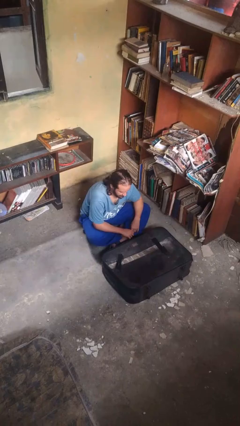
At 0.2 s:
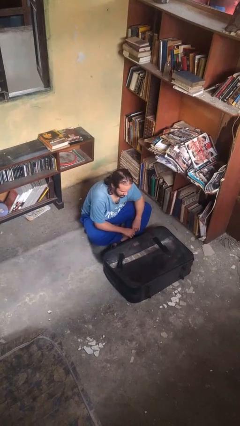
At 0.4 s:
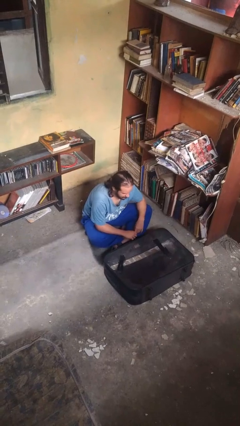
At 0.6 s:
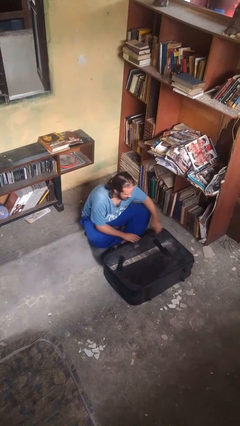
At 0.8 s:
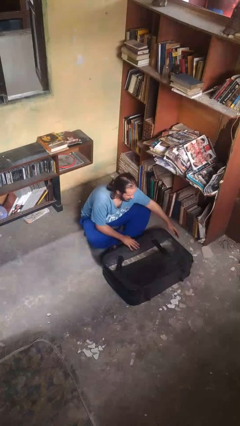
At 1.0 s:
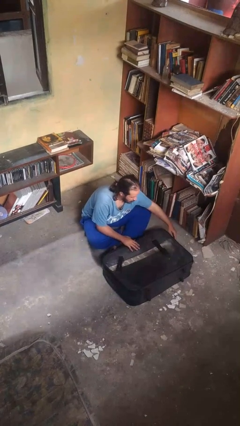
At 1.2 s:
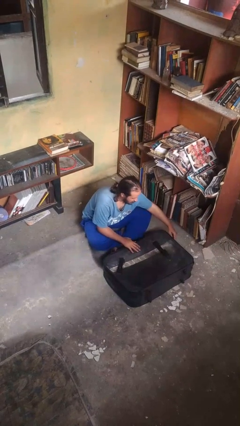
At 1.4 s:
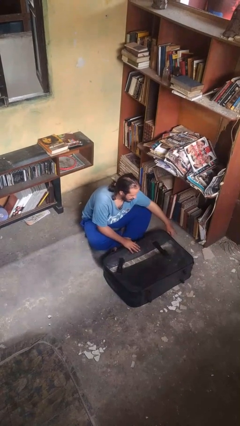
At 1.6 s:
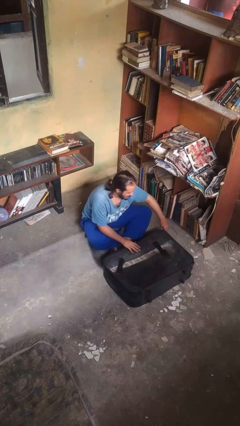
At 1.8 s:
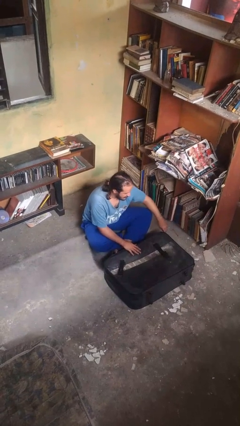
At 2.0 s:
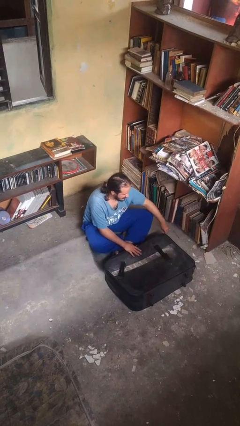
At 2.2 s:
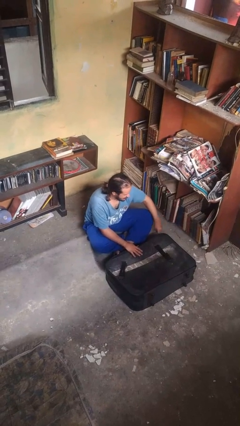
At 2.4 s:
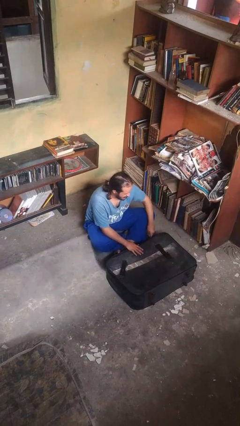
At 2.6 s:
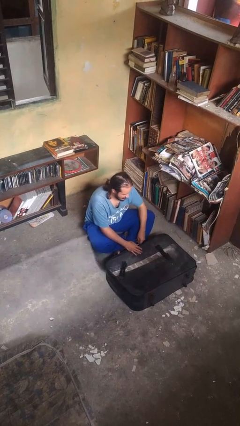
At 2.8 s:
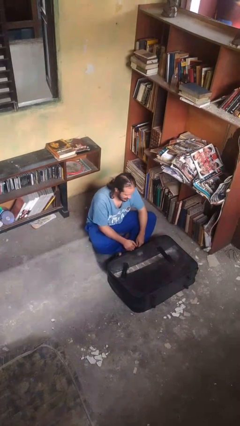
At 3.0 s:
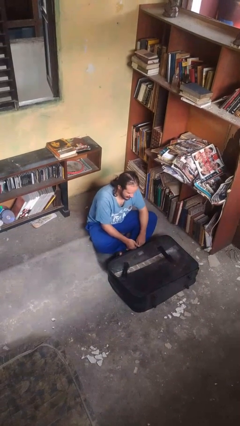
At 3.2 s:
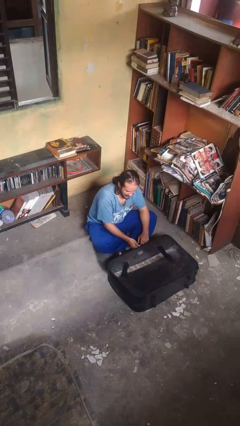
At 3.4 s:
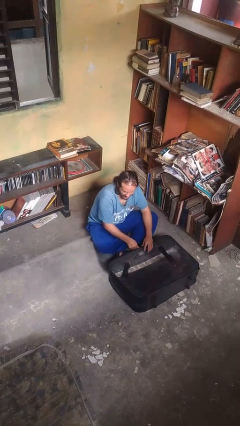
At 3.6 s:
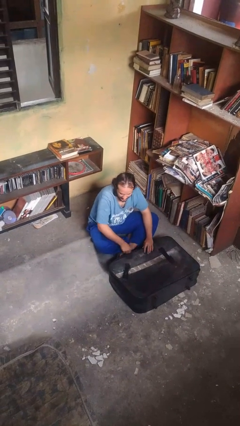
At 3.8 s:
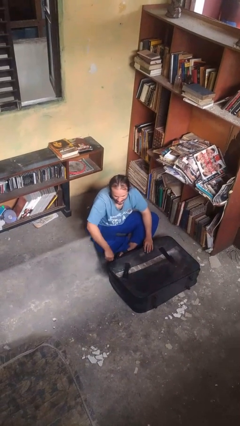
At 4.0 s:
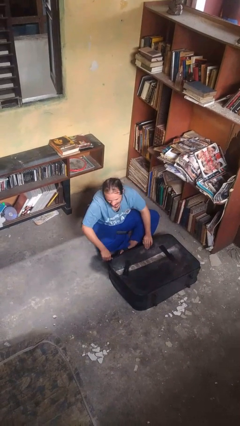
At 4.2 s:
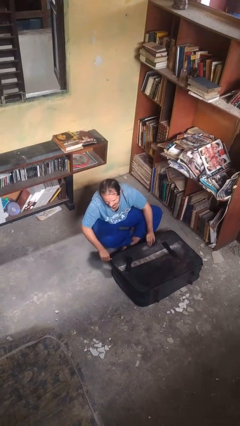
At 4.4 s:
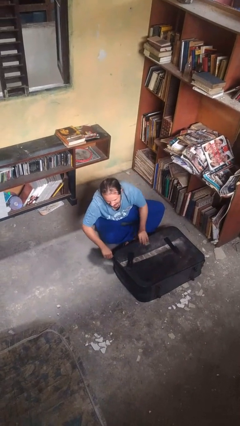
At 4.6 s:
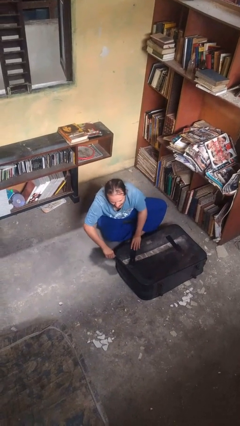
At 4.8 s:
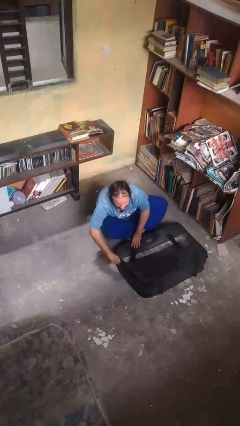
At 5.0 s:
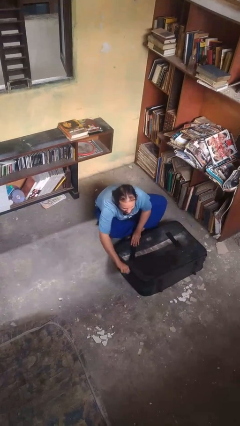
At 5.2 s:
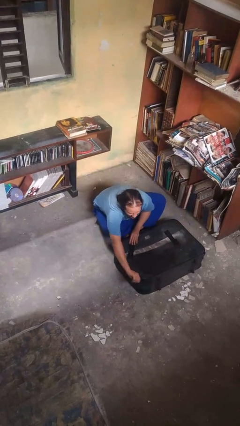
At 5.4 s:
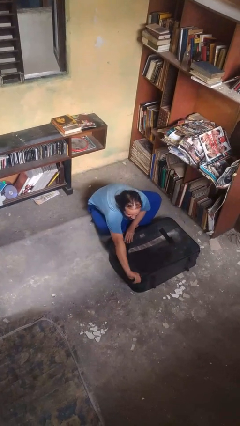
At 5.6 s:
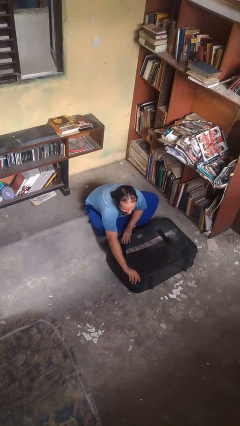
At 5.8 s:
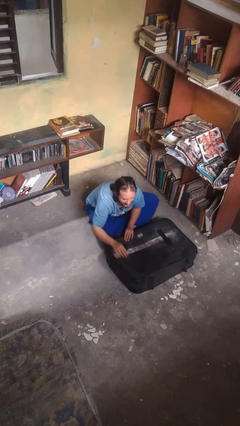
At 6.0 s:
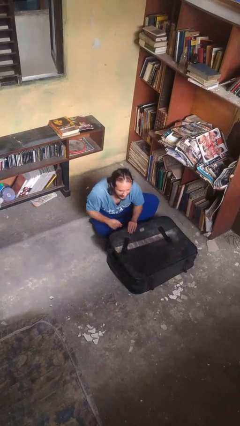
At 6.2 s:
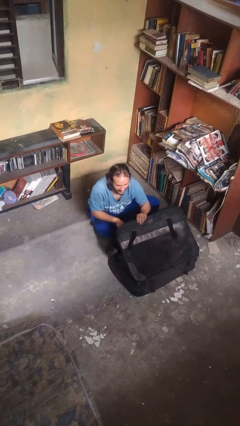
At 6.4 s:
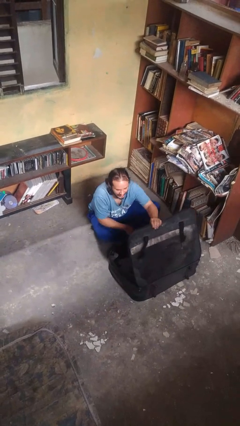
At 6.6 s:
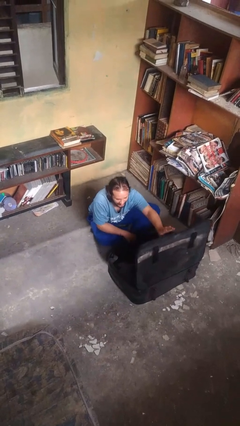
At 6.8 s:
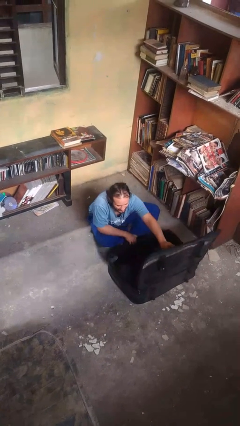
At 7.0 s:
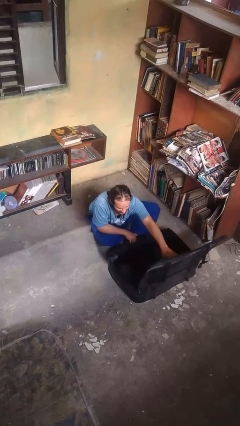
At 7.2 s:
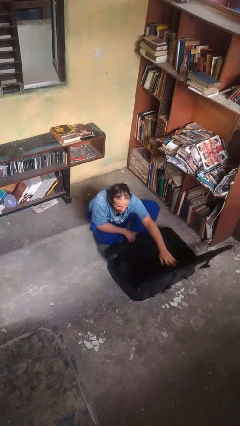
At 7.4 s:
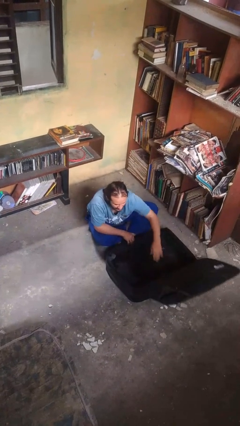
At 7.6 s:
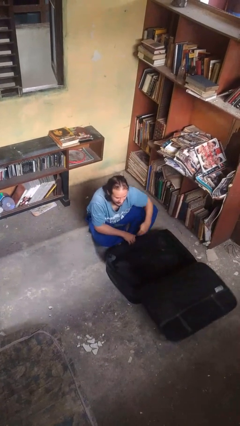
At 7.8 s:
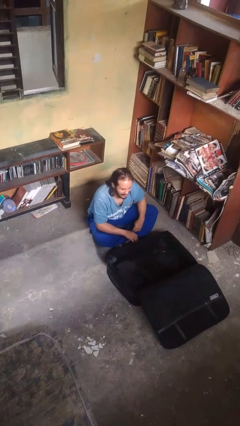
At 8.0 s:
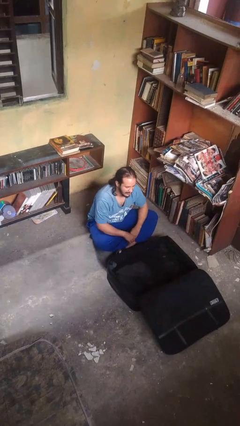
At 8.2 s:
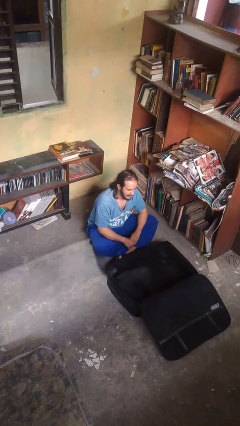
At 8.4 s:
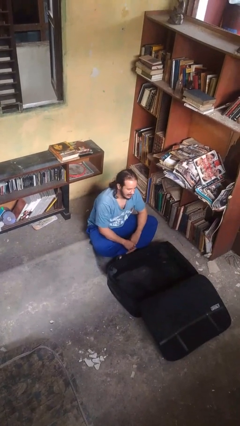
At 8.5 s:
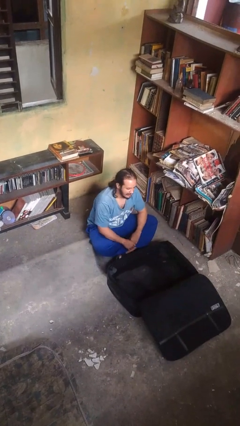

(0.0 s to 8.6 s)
person opens suitcase

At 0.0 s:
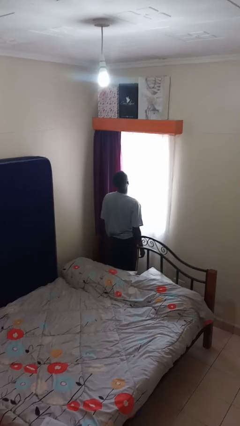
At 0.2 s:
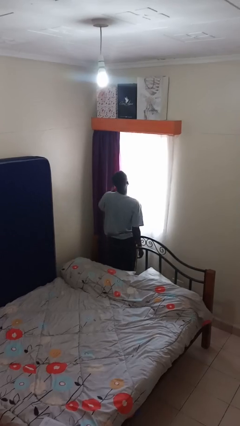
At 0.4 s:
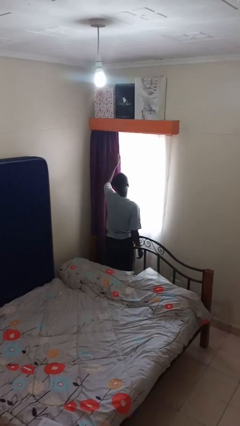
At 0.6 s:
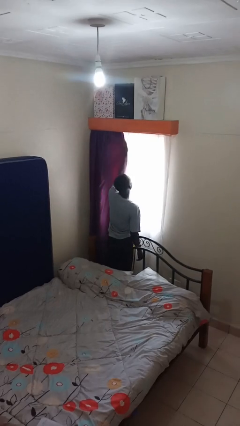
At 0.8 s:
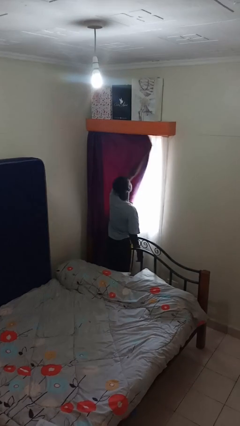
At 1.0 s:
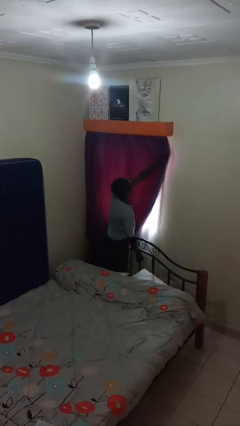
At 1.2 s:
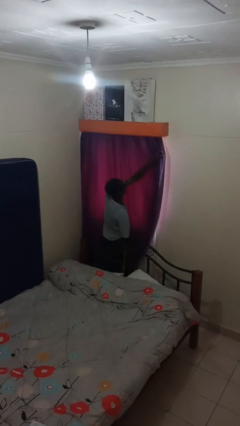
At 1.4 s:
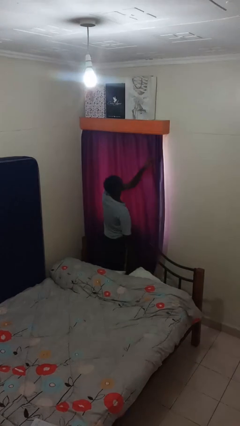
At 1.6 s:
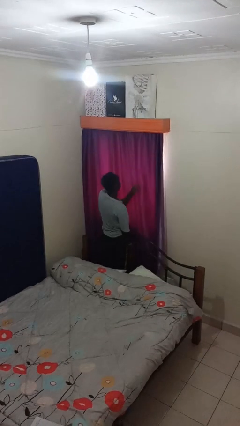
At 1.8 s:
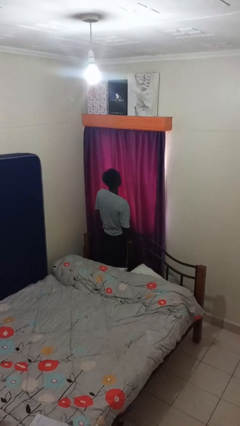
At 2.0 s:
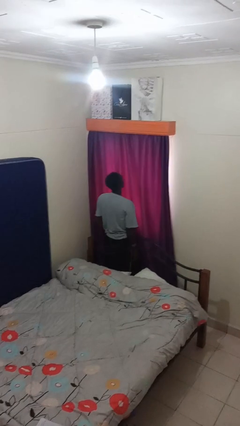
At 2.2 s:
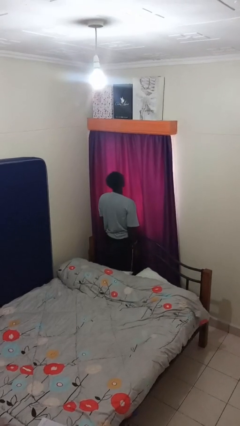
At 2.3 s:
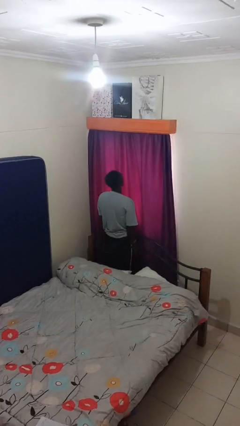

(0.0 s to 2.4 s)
person closes curtains

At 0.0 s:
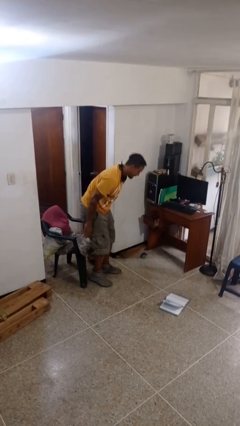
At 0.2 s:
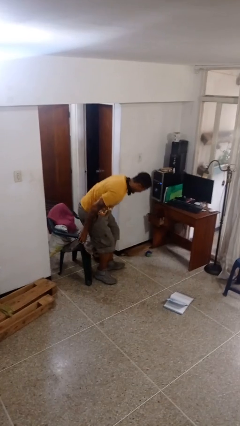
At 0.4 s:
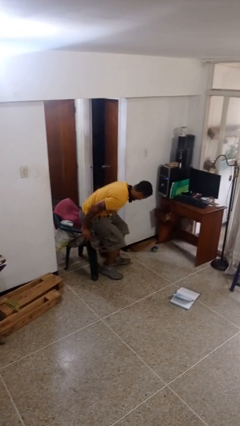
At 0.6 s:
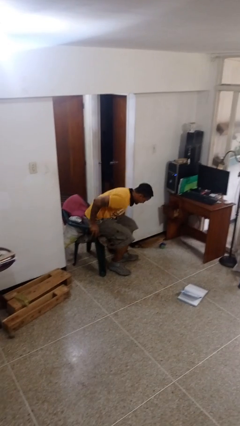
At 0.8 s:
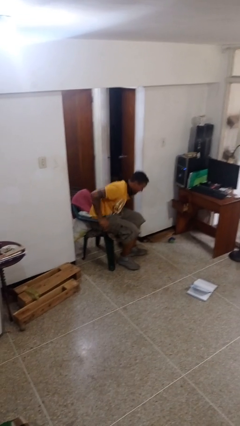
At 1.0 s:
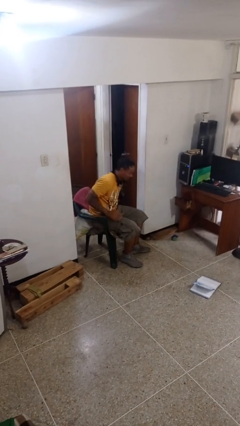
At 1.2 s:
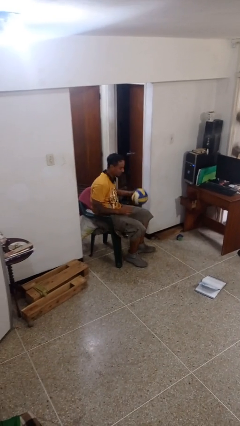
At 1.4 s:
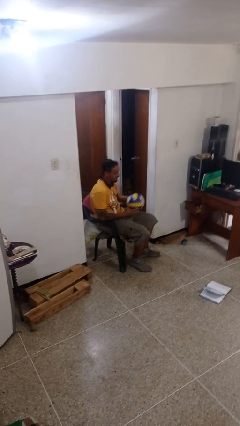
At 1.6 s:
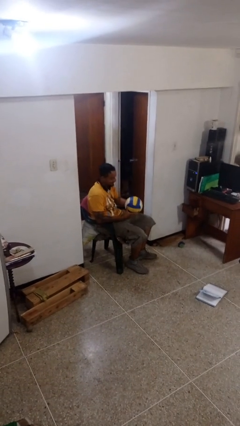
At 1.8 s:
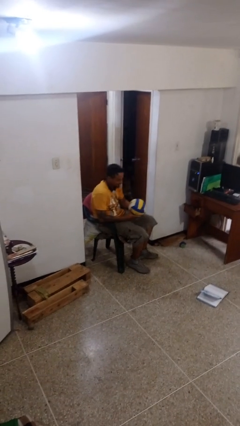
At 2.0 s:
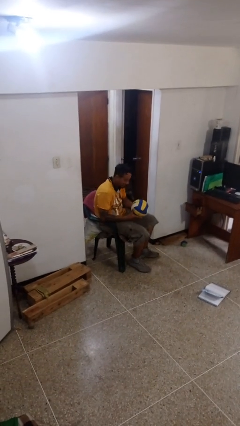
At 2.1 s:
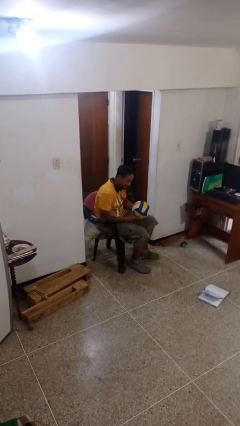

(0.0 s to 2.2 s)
person sits down

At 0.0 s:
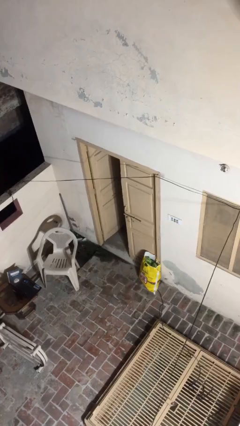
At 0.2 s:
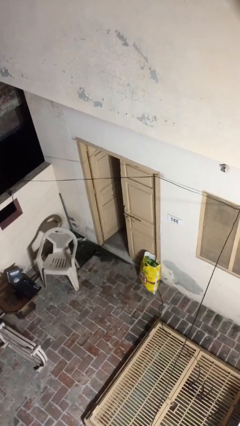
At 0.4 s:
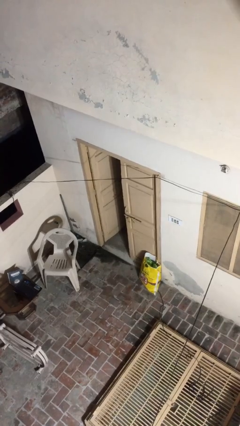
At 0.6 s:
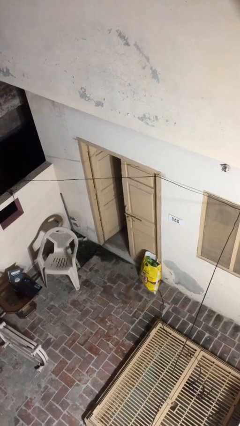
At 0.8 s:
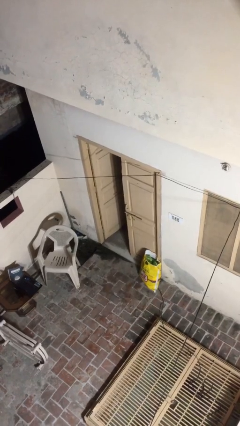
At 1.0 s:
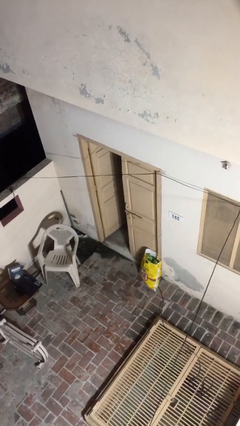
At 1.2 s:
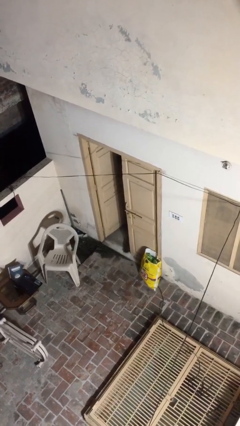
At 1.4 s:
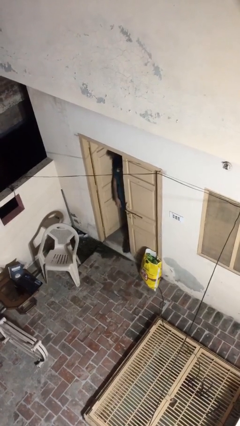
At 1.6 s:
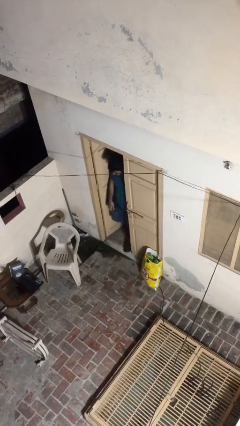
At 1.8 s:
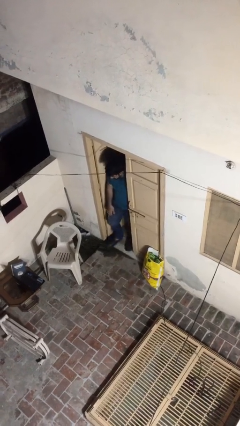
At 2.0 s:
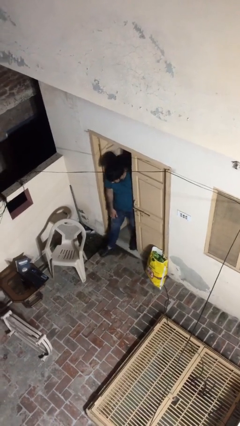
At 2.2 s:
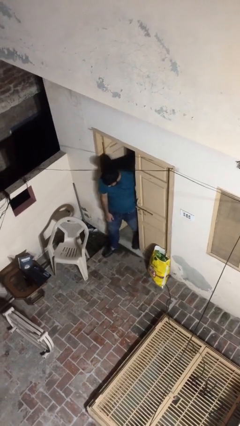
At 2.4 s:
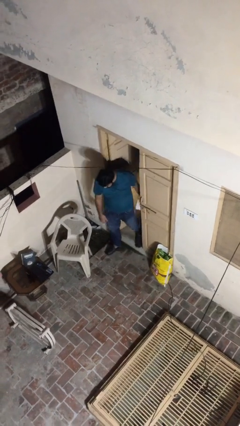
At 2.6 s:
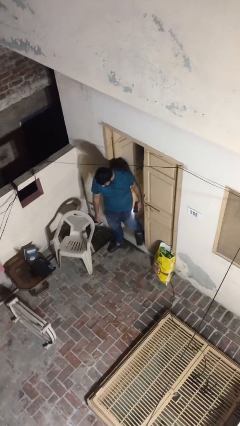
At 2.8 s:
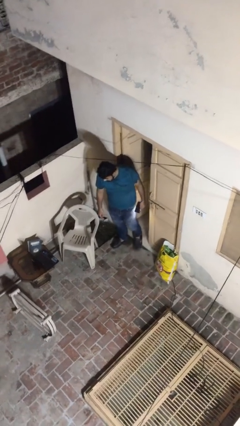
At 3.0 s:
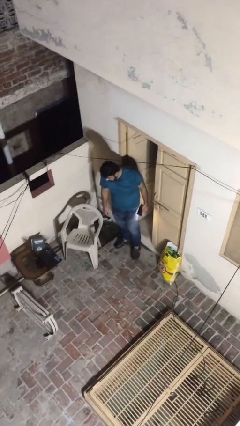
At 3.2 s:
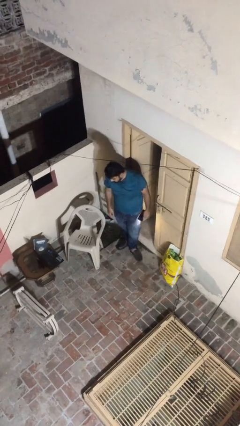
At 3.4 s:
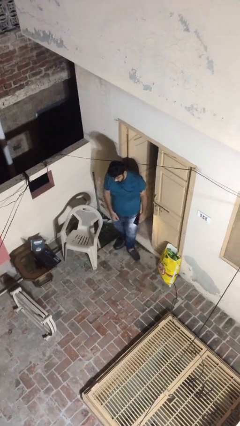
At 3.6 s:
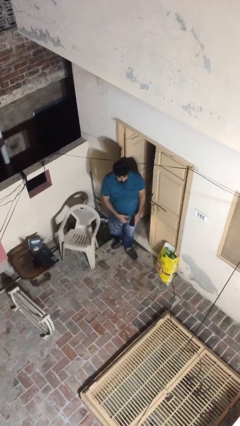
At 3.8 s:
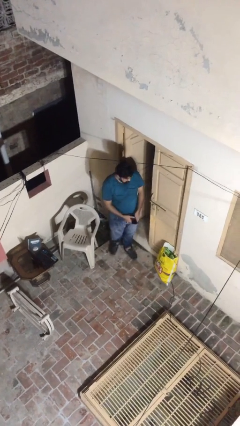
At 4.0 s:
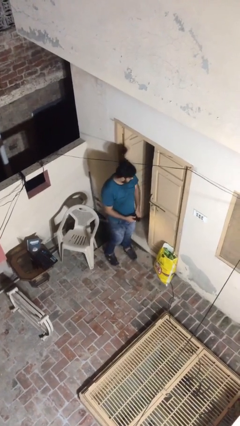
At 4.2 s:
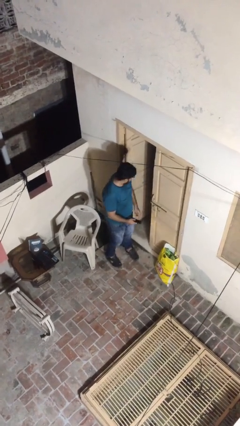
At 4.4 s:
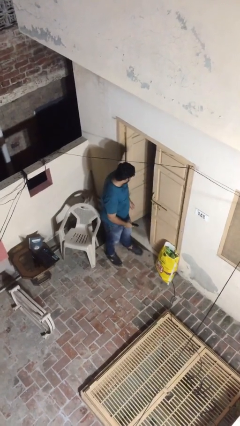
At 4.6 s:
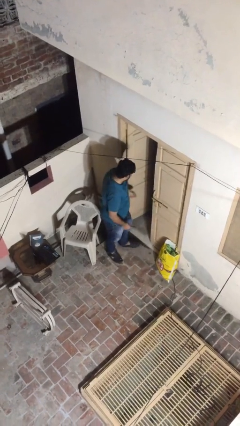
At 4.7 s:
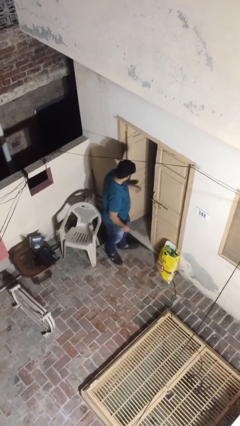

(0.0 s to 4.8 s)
person enters scene through structure
